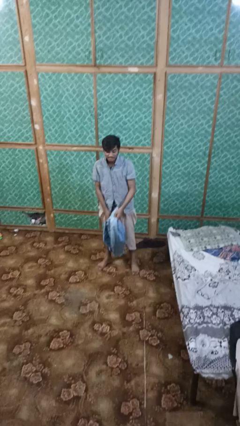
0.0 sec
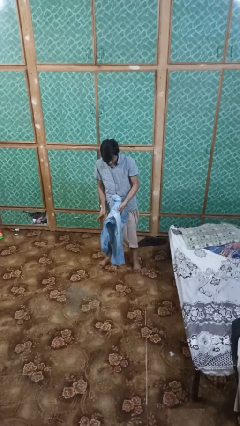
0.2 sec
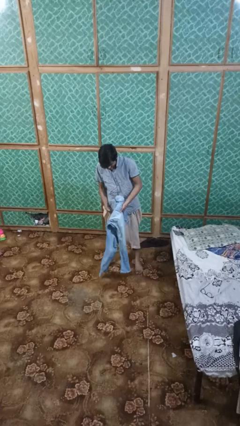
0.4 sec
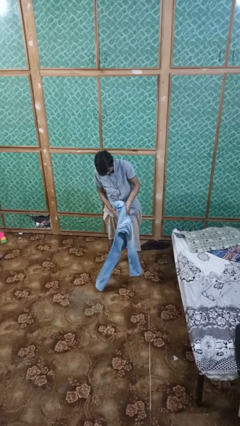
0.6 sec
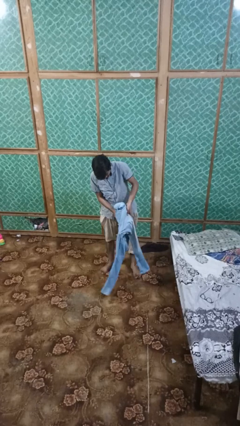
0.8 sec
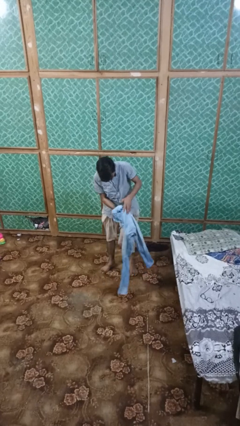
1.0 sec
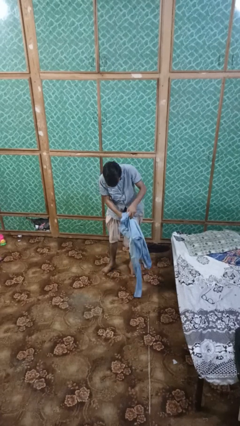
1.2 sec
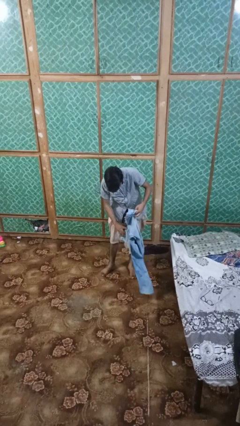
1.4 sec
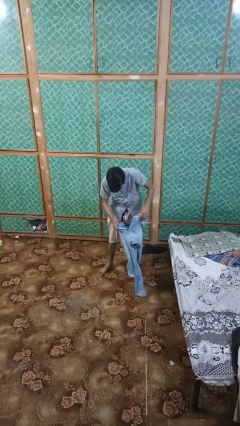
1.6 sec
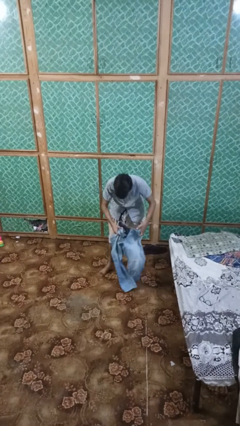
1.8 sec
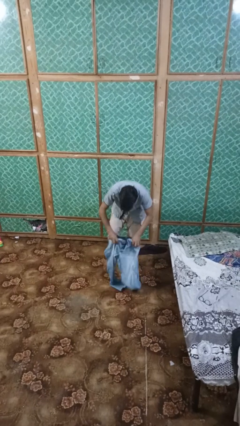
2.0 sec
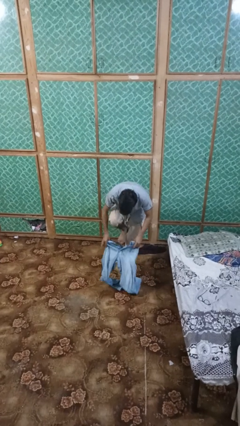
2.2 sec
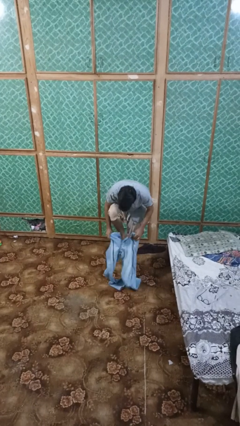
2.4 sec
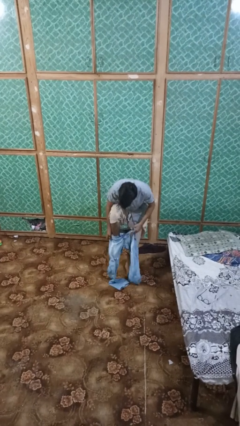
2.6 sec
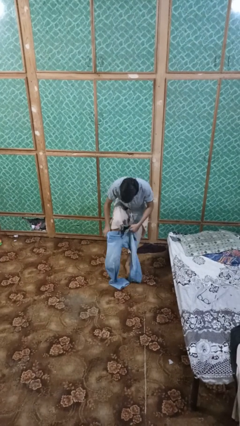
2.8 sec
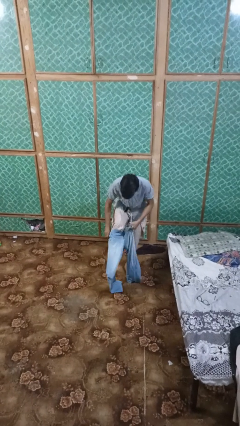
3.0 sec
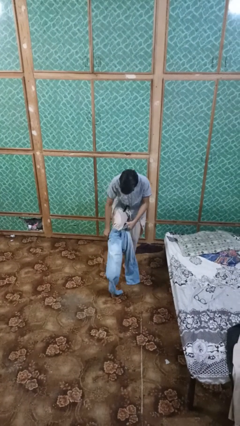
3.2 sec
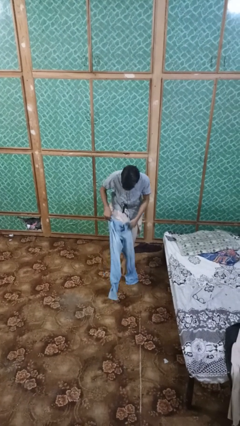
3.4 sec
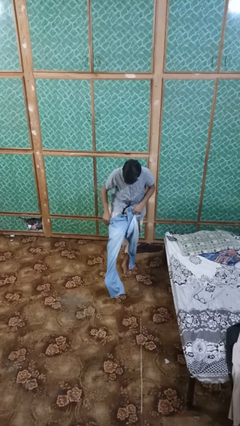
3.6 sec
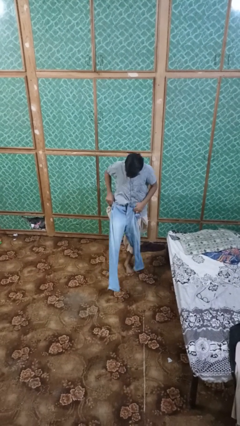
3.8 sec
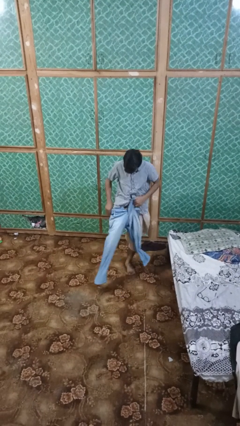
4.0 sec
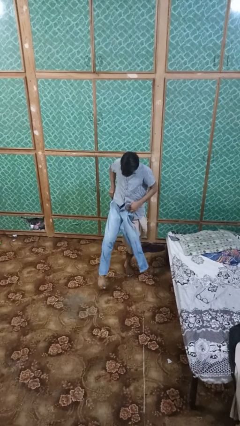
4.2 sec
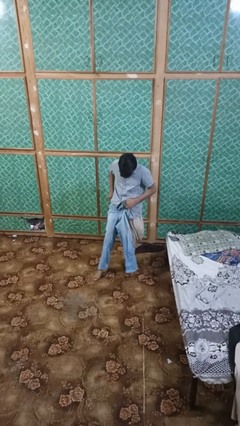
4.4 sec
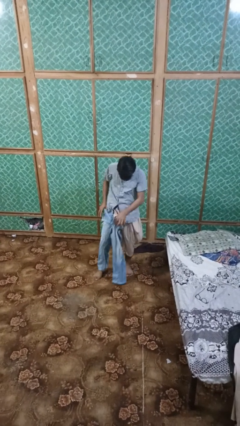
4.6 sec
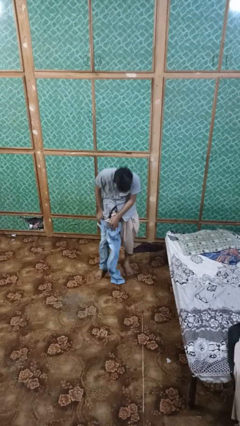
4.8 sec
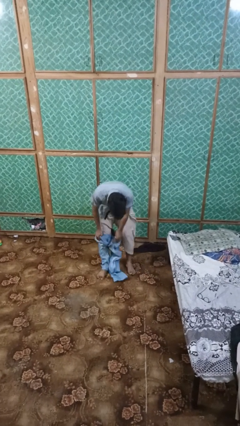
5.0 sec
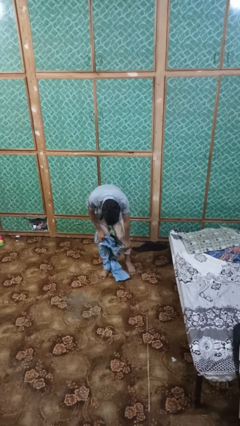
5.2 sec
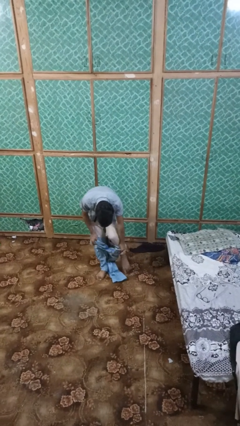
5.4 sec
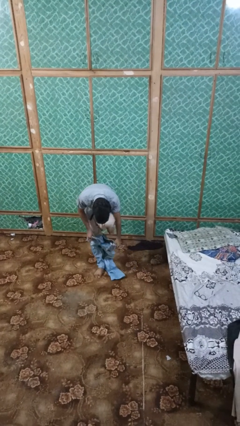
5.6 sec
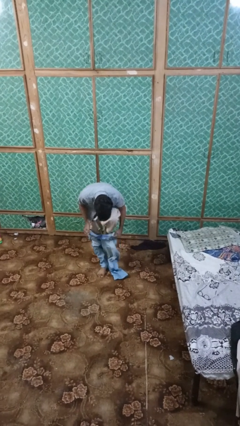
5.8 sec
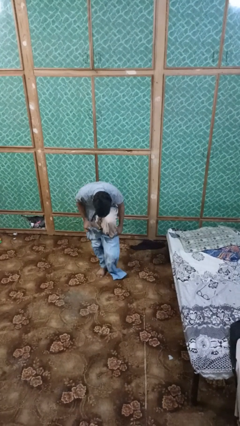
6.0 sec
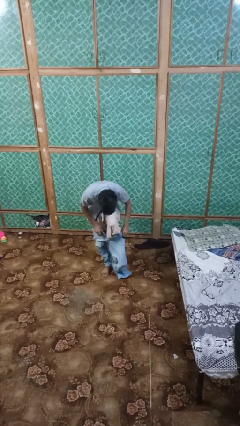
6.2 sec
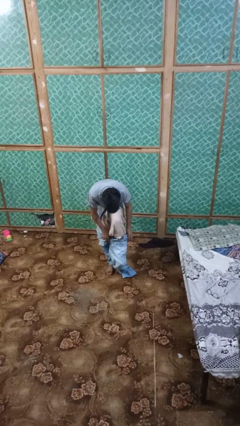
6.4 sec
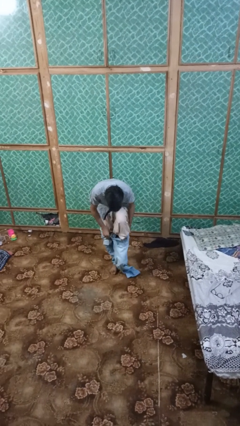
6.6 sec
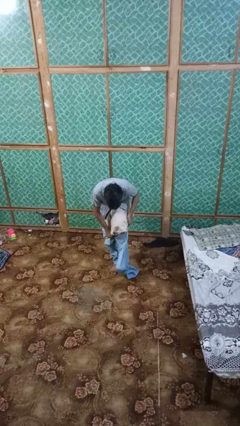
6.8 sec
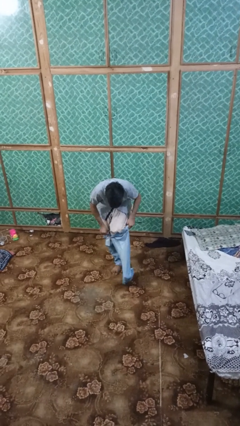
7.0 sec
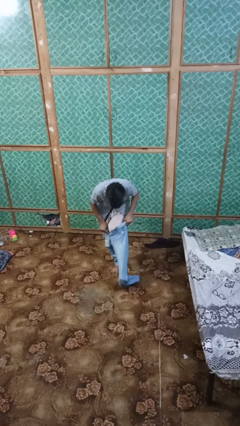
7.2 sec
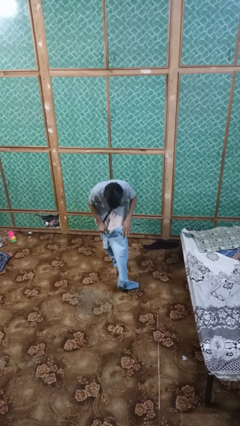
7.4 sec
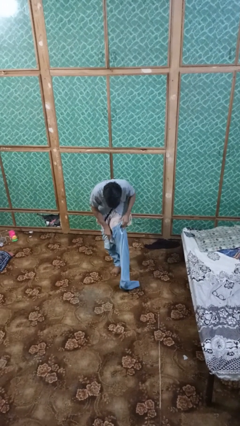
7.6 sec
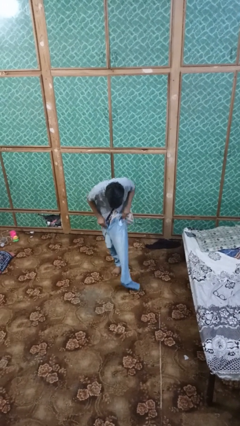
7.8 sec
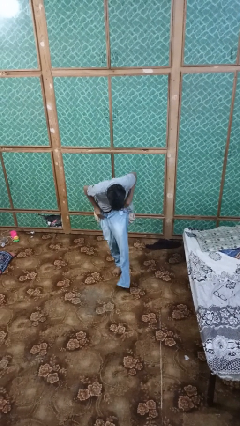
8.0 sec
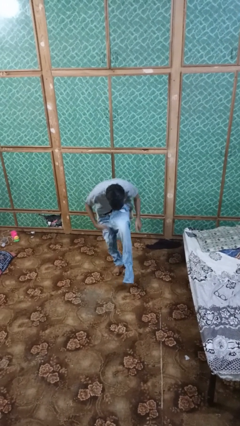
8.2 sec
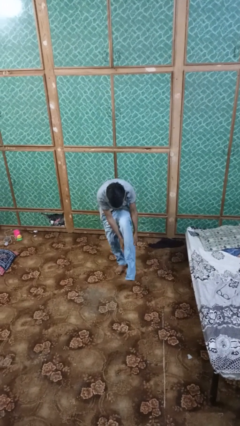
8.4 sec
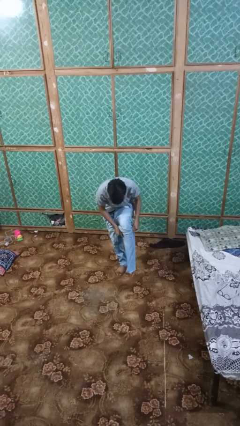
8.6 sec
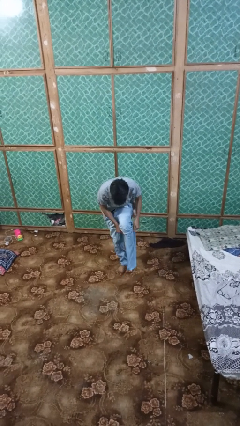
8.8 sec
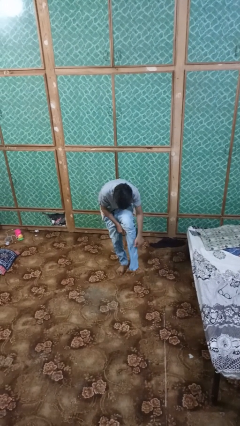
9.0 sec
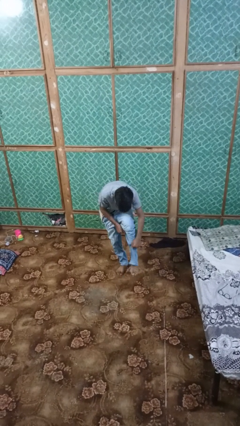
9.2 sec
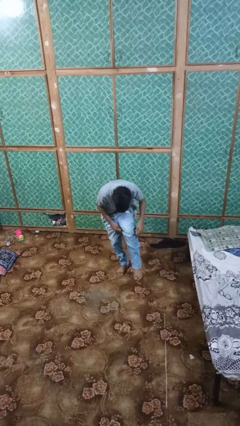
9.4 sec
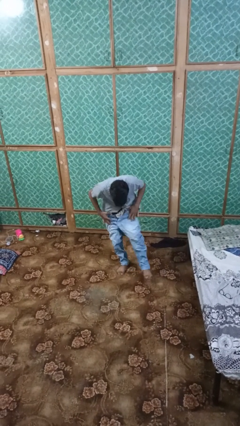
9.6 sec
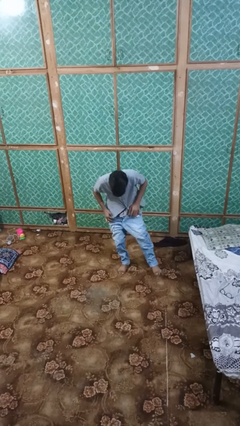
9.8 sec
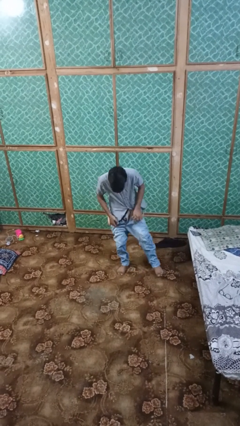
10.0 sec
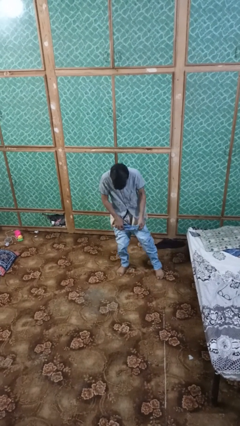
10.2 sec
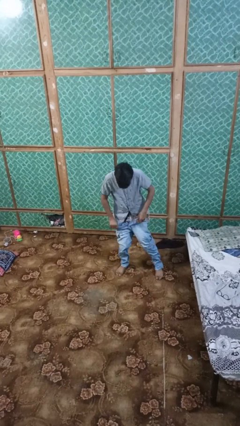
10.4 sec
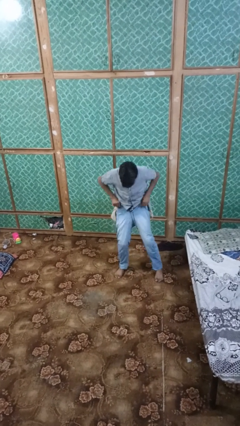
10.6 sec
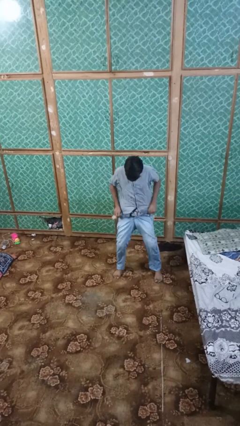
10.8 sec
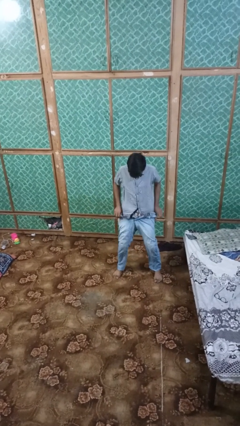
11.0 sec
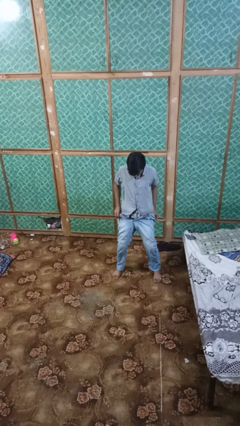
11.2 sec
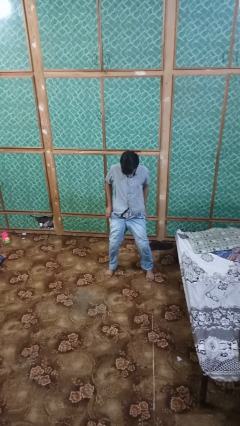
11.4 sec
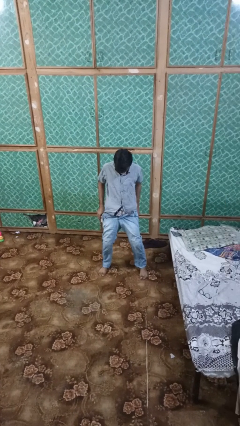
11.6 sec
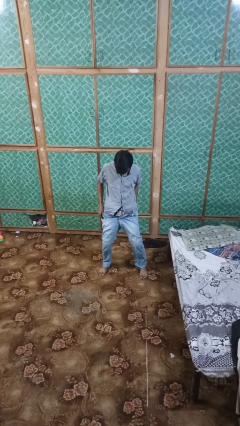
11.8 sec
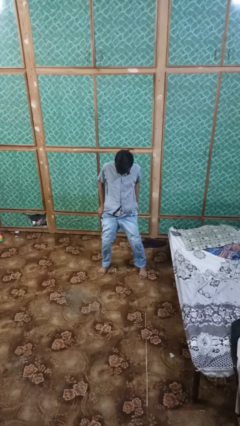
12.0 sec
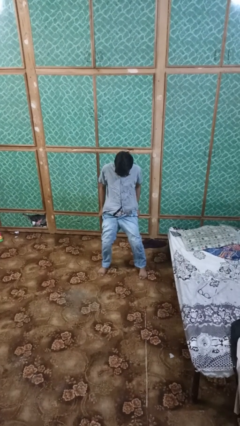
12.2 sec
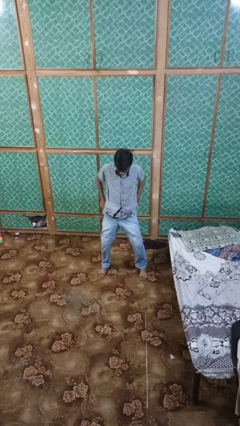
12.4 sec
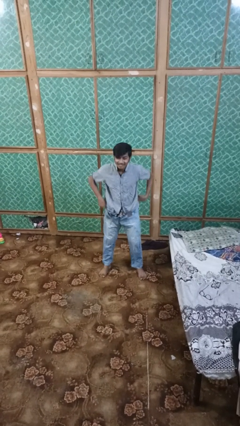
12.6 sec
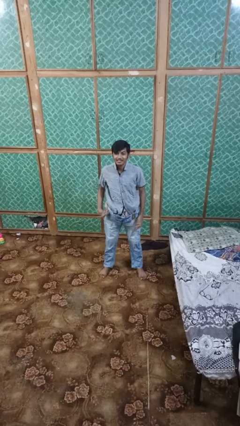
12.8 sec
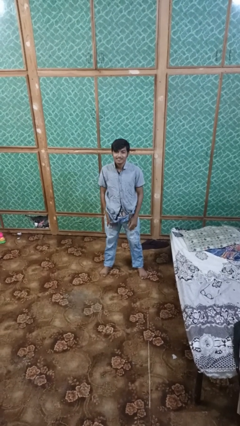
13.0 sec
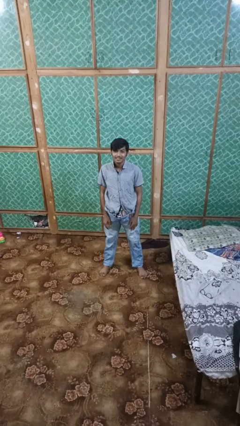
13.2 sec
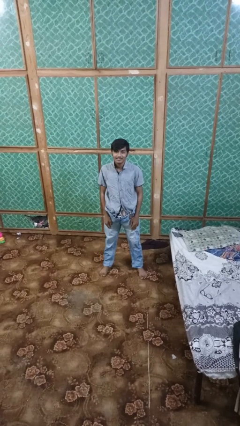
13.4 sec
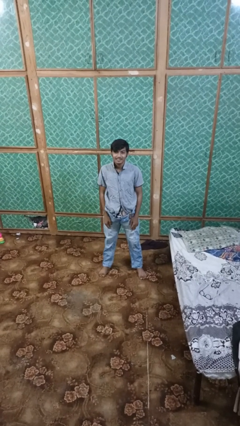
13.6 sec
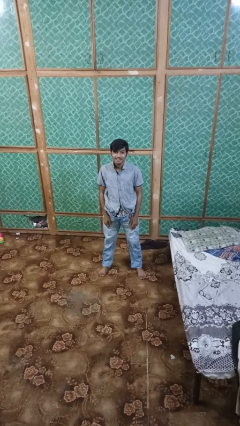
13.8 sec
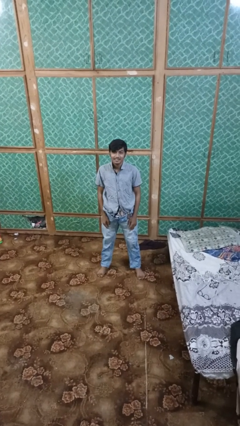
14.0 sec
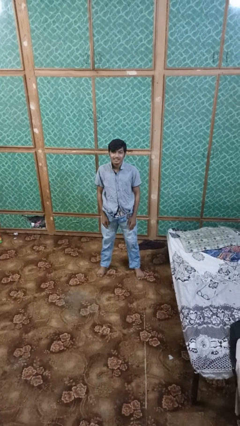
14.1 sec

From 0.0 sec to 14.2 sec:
person puts on pants

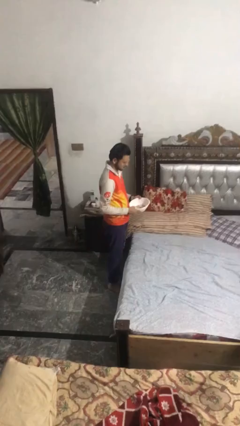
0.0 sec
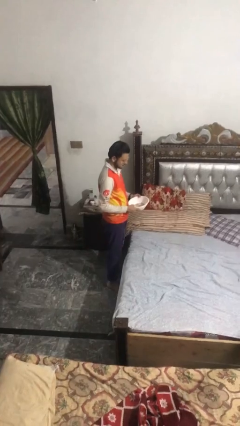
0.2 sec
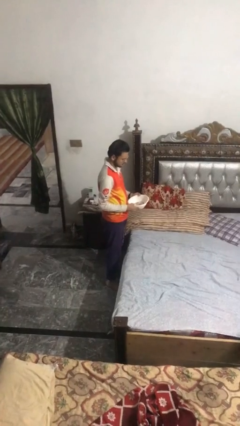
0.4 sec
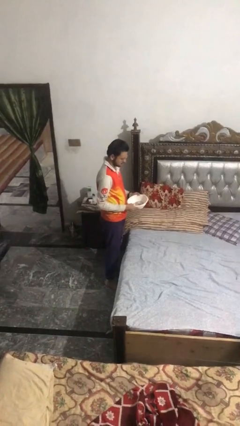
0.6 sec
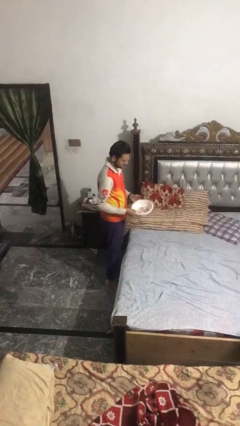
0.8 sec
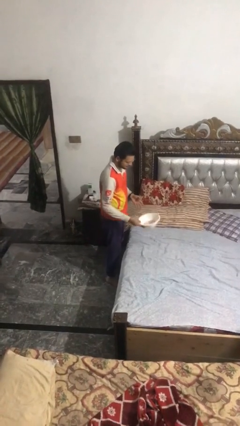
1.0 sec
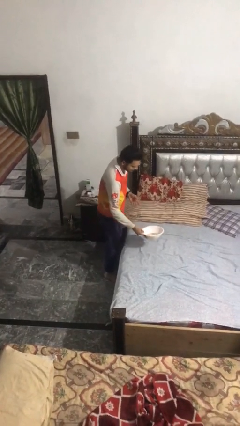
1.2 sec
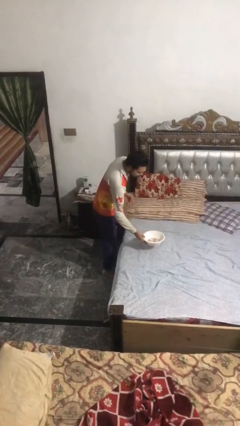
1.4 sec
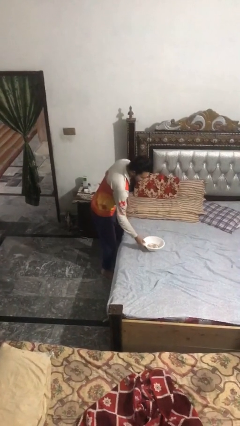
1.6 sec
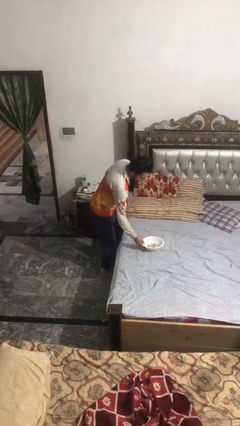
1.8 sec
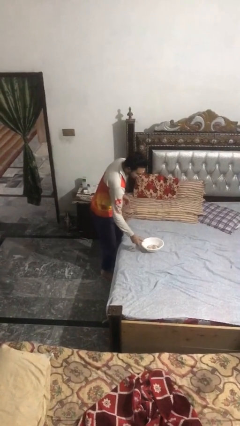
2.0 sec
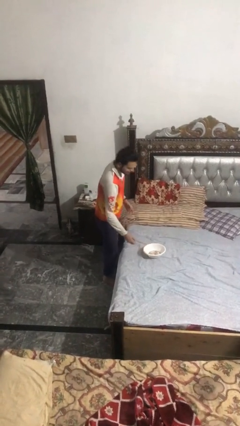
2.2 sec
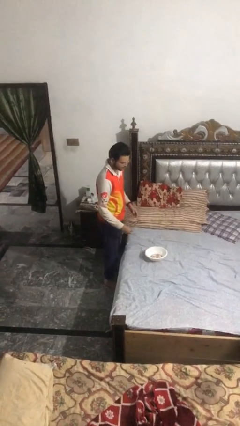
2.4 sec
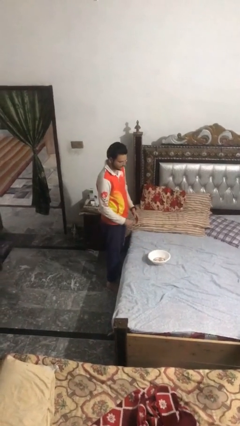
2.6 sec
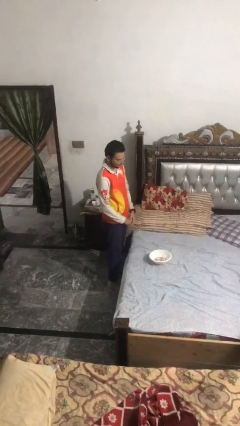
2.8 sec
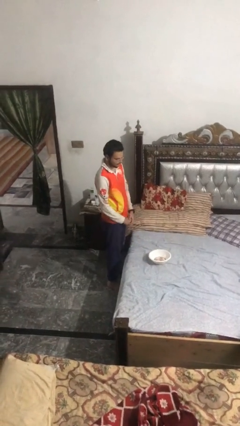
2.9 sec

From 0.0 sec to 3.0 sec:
person puts down object on countertop

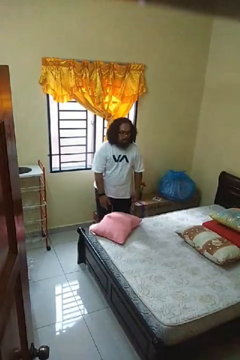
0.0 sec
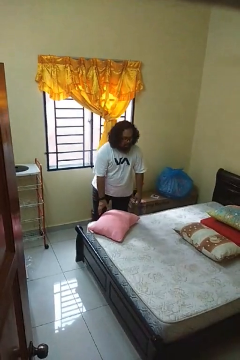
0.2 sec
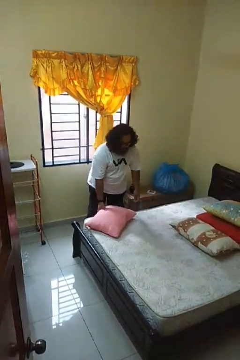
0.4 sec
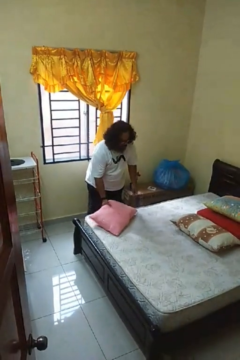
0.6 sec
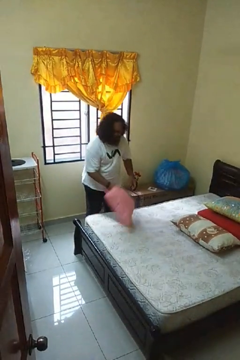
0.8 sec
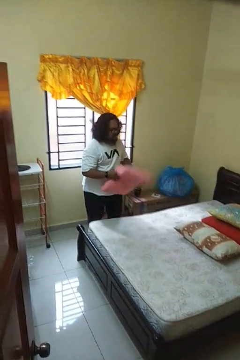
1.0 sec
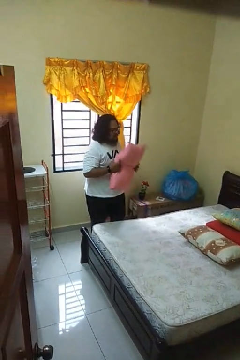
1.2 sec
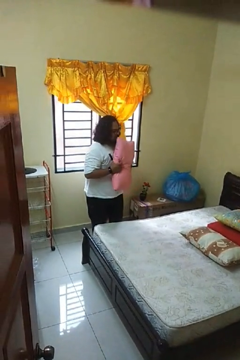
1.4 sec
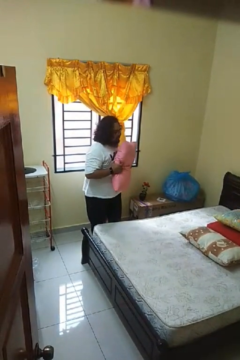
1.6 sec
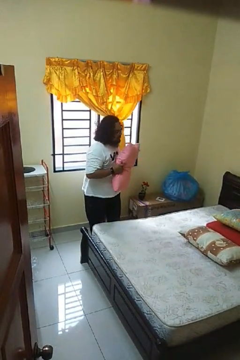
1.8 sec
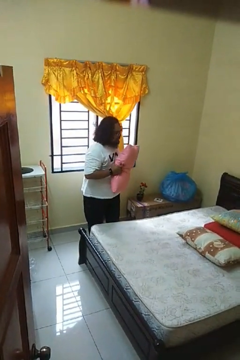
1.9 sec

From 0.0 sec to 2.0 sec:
person picks up object from bed
